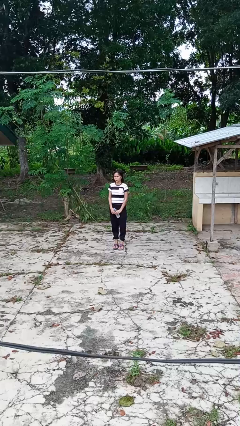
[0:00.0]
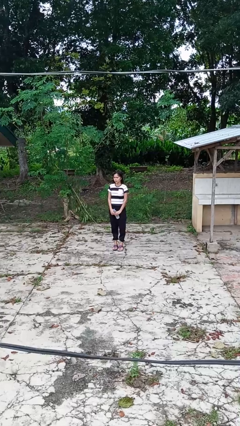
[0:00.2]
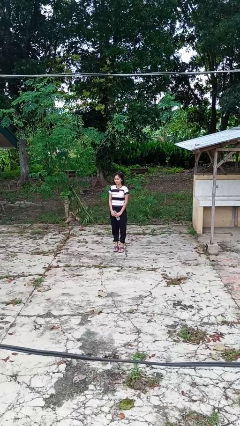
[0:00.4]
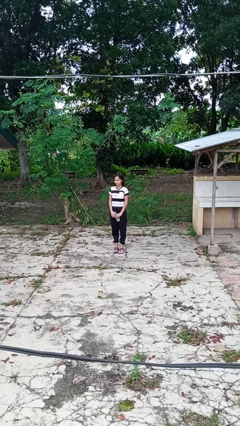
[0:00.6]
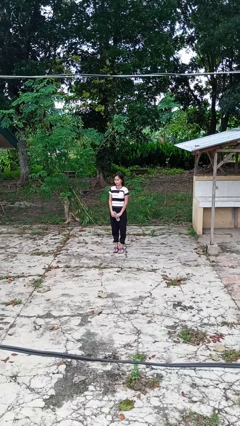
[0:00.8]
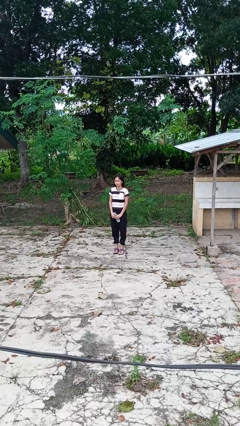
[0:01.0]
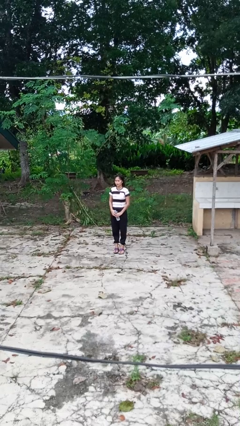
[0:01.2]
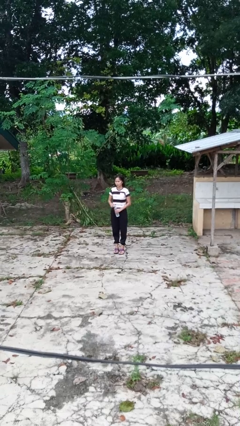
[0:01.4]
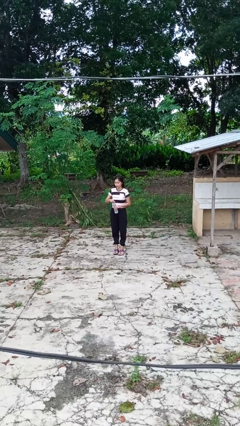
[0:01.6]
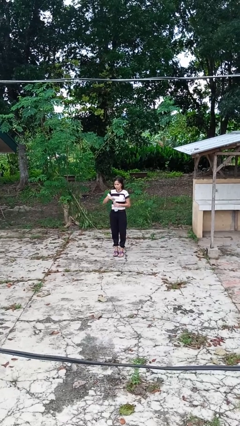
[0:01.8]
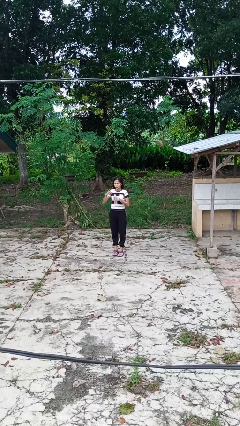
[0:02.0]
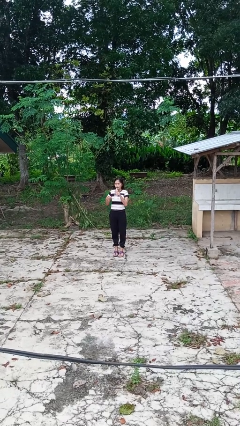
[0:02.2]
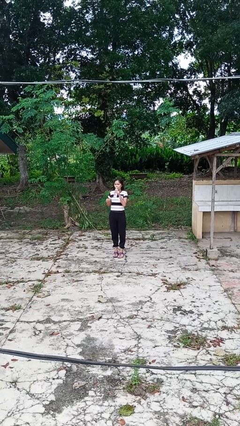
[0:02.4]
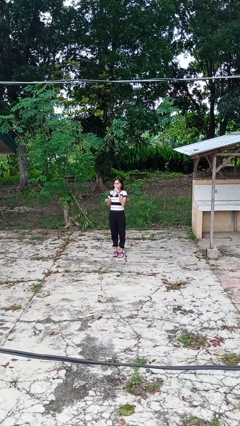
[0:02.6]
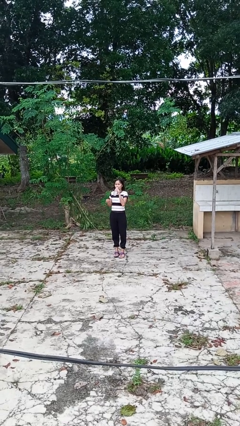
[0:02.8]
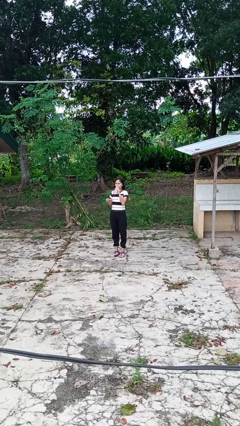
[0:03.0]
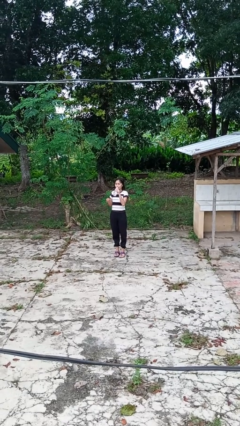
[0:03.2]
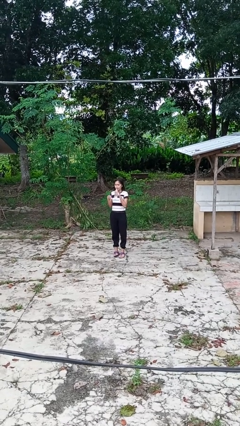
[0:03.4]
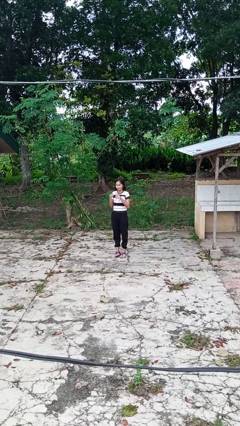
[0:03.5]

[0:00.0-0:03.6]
person drinks from bottle

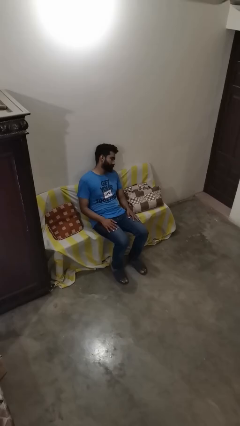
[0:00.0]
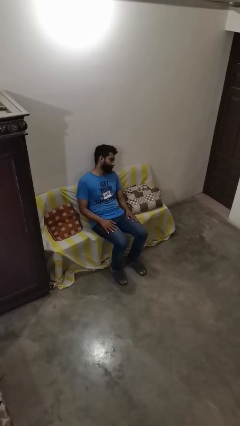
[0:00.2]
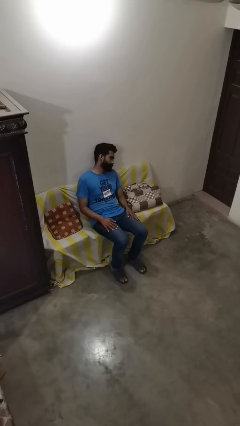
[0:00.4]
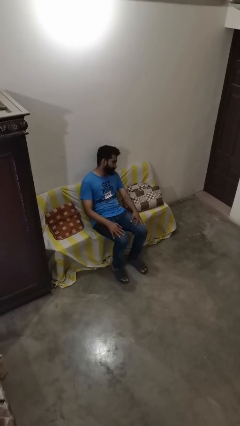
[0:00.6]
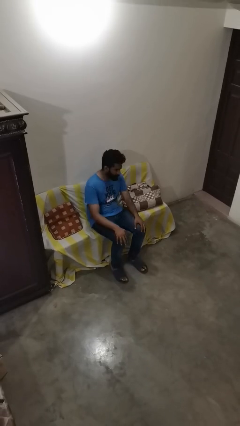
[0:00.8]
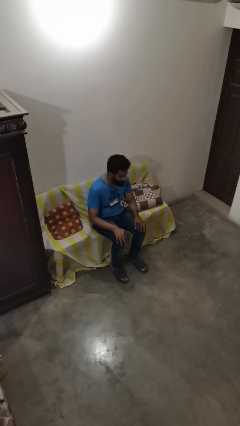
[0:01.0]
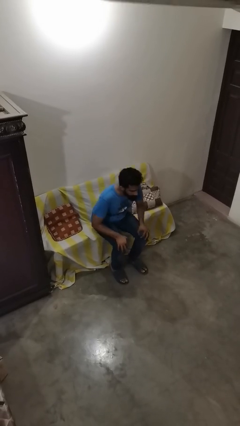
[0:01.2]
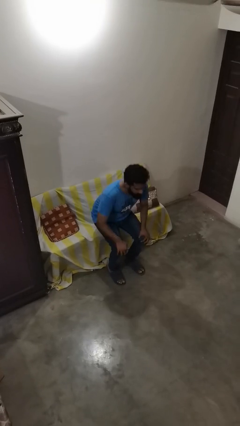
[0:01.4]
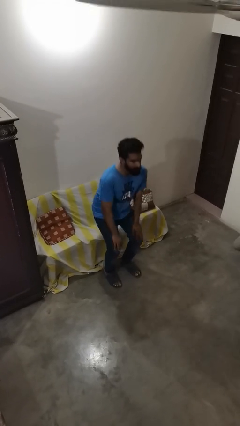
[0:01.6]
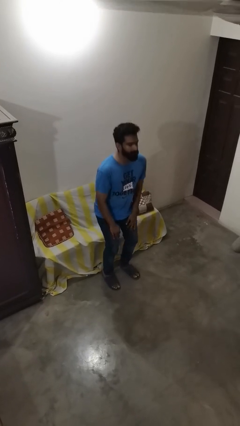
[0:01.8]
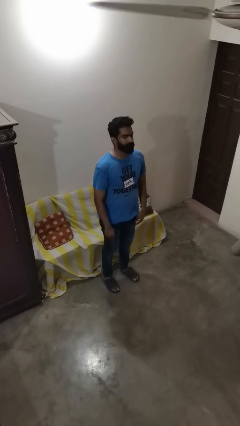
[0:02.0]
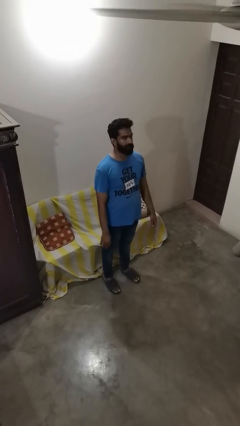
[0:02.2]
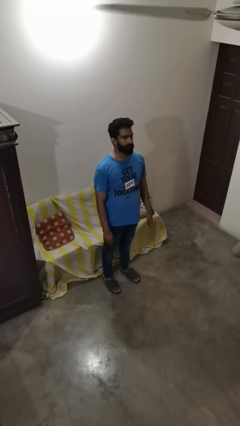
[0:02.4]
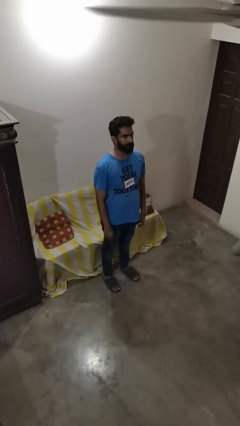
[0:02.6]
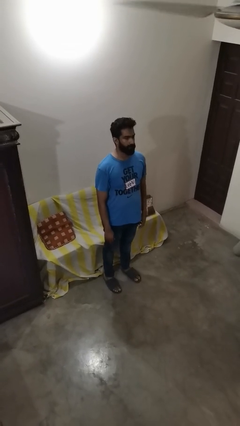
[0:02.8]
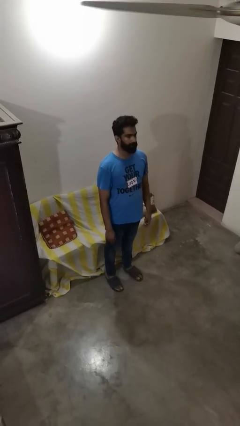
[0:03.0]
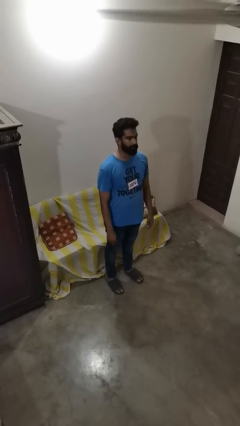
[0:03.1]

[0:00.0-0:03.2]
person stands up

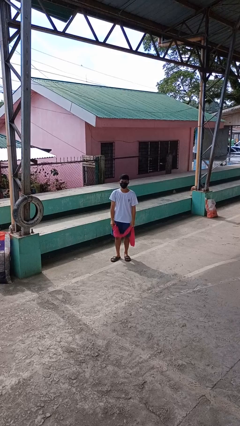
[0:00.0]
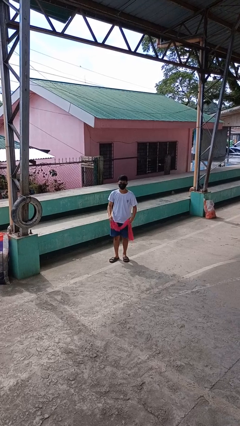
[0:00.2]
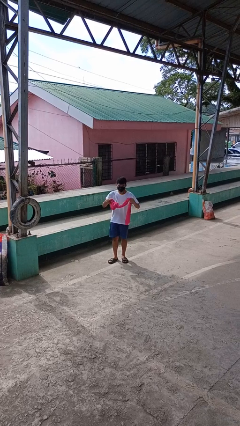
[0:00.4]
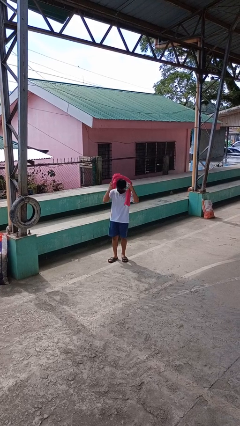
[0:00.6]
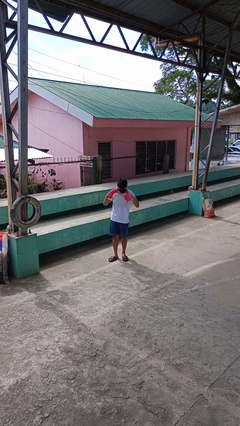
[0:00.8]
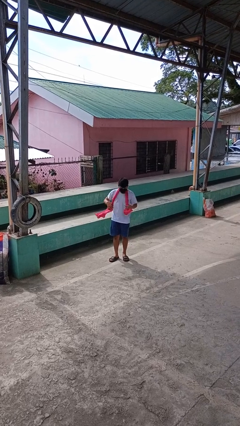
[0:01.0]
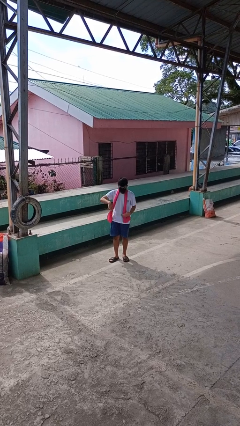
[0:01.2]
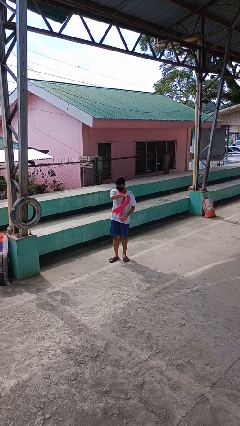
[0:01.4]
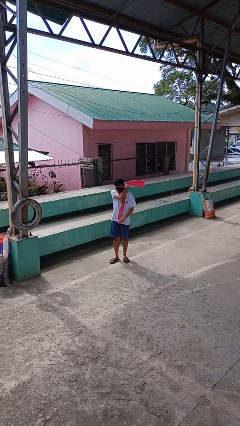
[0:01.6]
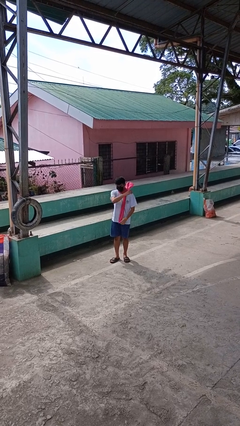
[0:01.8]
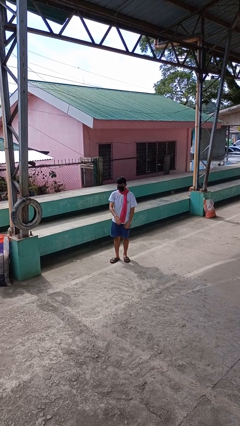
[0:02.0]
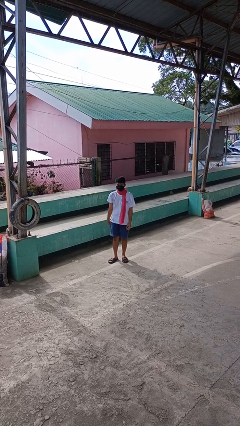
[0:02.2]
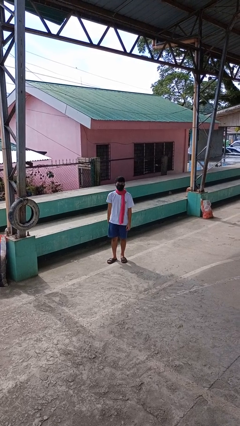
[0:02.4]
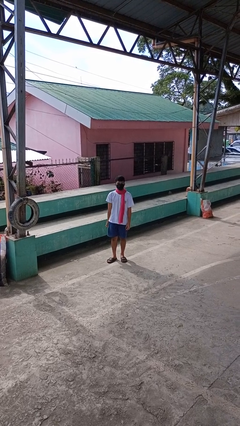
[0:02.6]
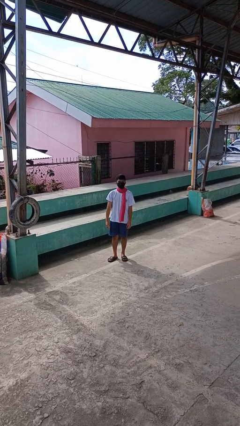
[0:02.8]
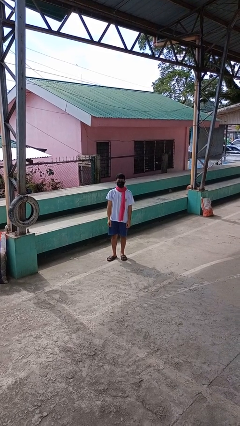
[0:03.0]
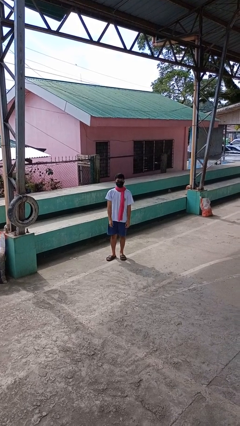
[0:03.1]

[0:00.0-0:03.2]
person puts on scarf

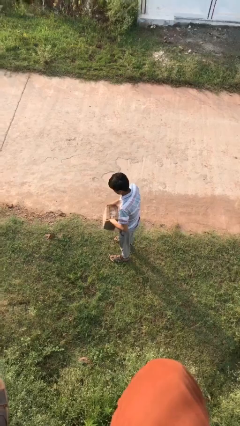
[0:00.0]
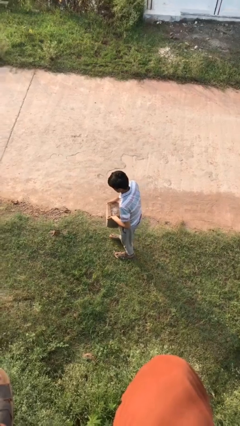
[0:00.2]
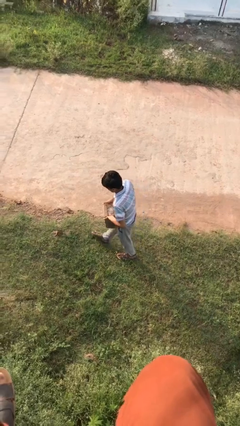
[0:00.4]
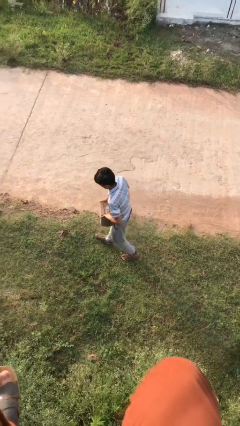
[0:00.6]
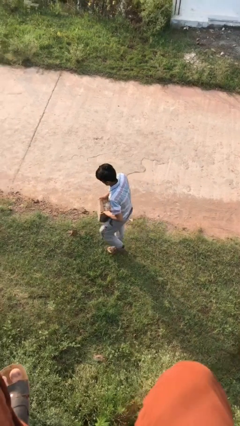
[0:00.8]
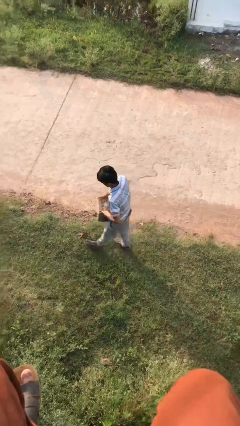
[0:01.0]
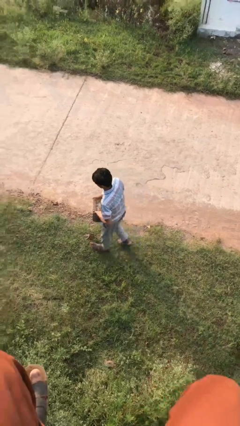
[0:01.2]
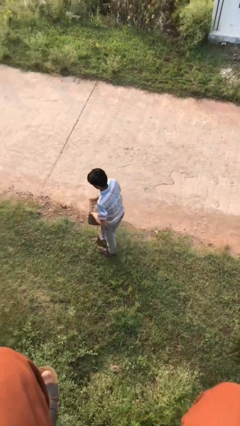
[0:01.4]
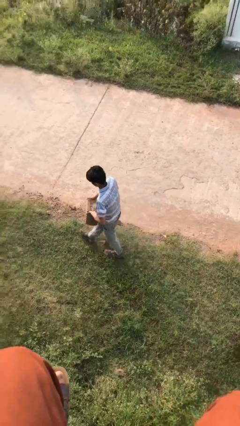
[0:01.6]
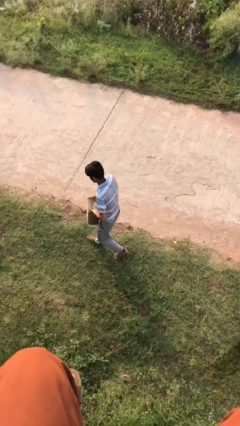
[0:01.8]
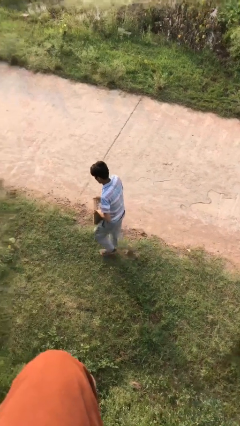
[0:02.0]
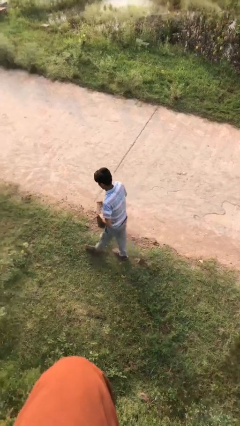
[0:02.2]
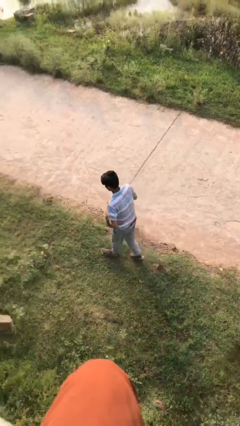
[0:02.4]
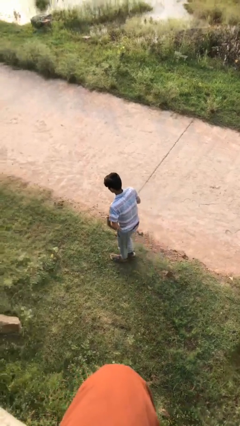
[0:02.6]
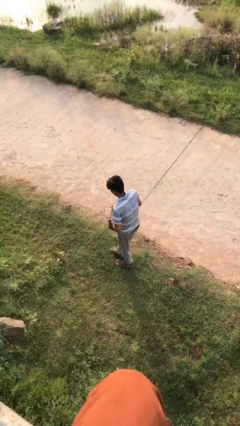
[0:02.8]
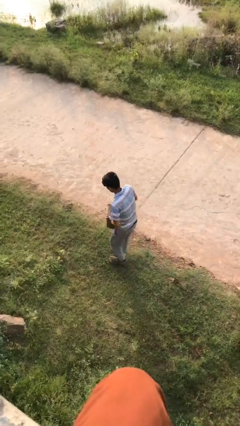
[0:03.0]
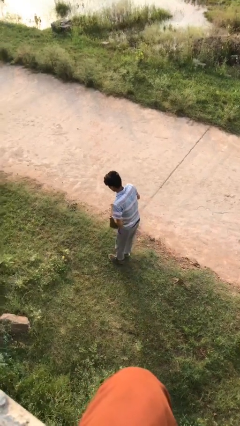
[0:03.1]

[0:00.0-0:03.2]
person carries heavy object

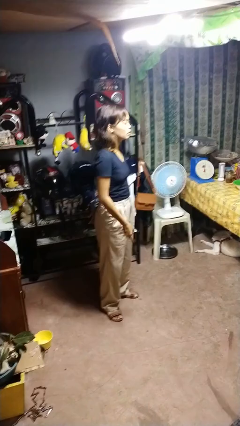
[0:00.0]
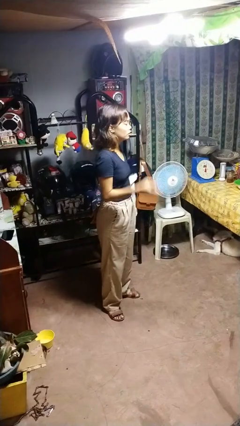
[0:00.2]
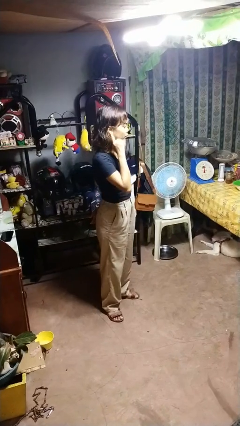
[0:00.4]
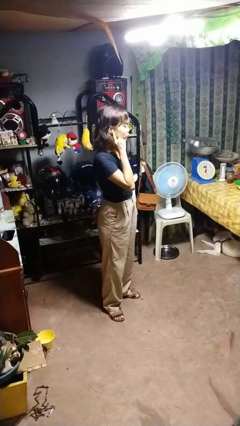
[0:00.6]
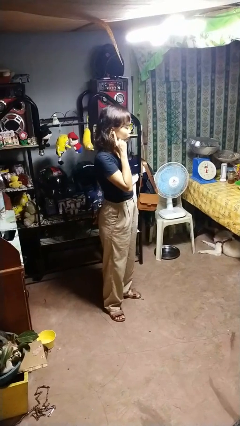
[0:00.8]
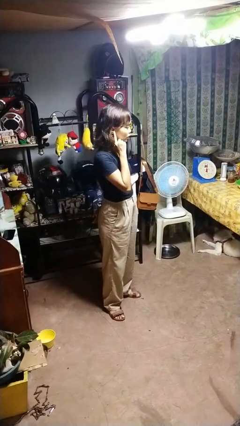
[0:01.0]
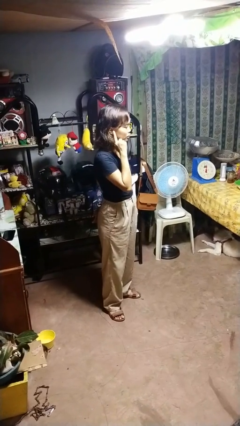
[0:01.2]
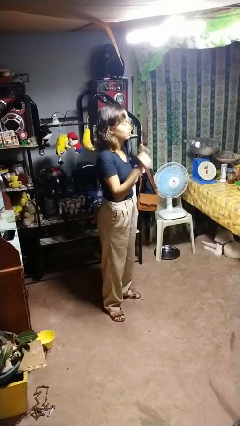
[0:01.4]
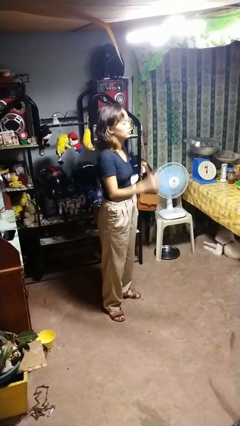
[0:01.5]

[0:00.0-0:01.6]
person gestures listen closely

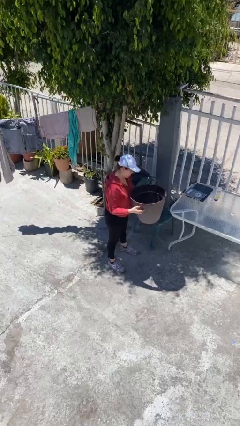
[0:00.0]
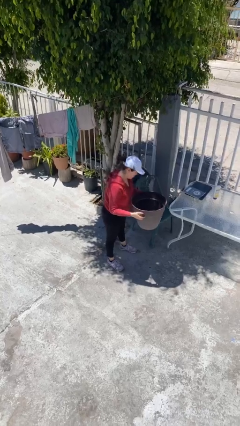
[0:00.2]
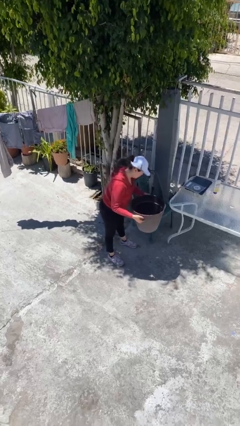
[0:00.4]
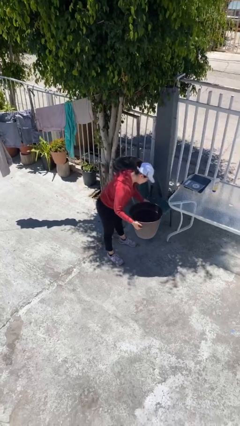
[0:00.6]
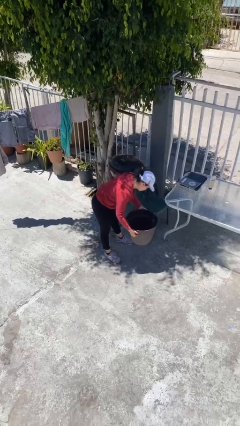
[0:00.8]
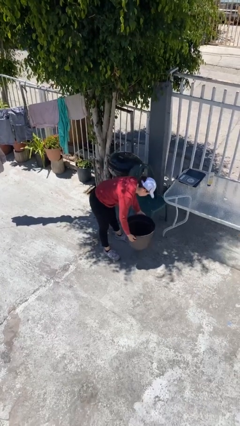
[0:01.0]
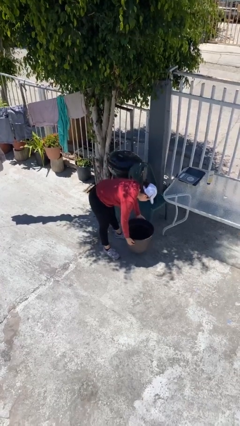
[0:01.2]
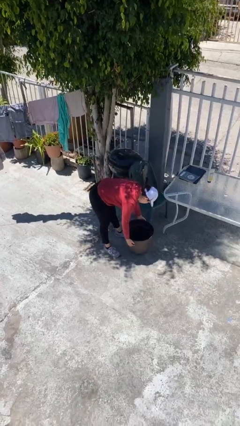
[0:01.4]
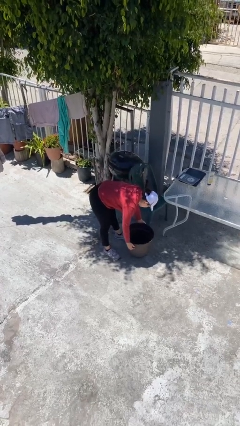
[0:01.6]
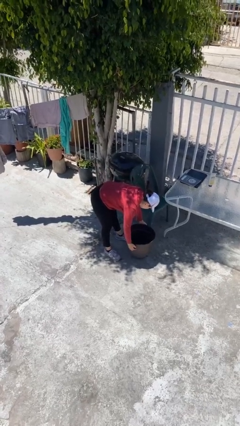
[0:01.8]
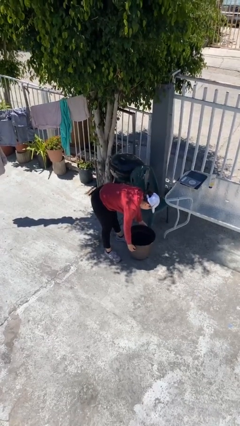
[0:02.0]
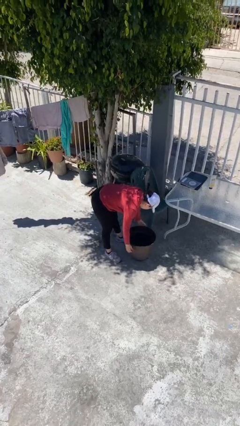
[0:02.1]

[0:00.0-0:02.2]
person puts down object on floor

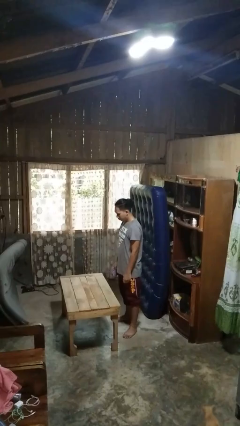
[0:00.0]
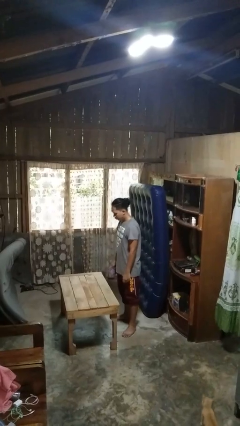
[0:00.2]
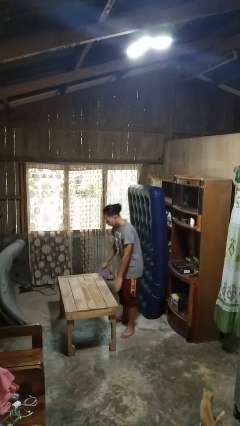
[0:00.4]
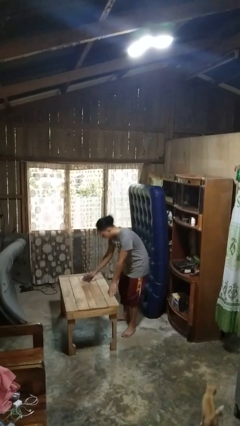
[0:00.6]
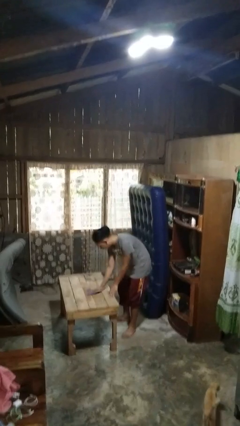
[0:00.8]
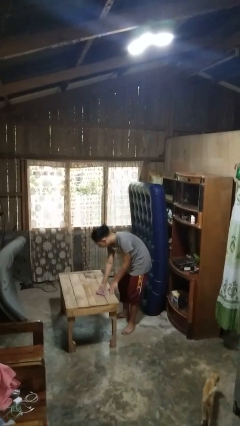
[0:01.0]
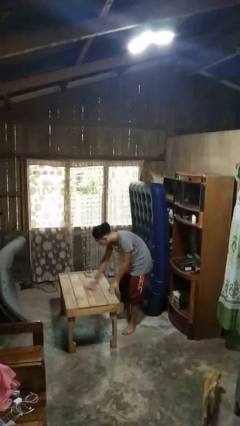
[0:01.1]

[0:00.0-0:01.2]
person cleans table with rag
